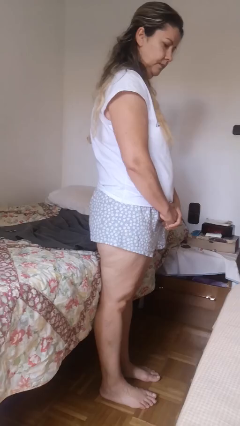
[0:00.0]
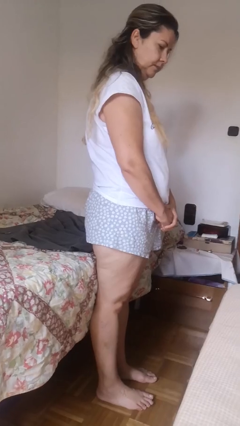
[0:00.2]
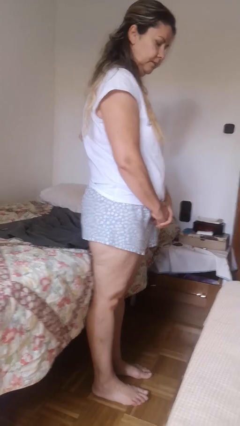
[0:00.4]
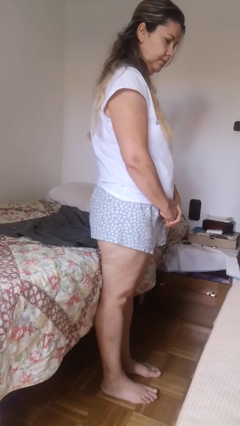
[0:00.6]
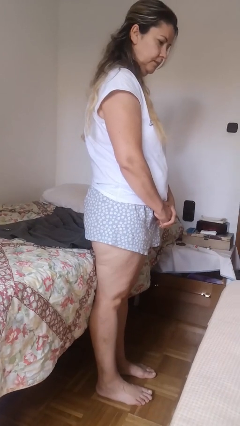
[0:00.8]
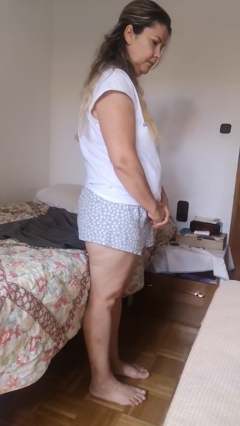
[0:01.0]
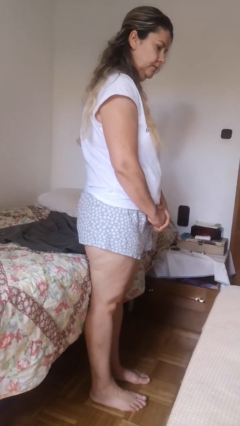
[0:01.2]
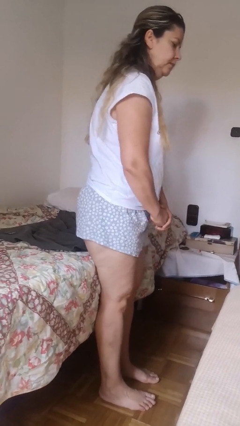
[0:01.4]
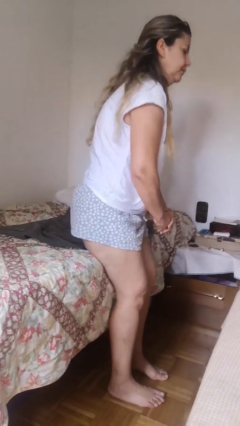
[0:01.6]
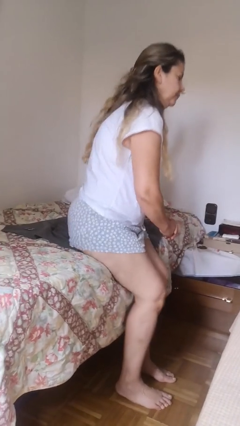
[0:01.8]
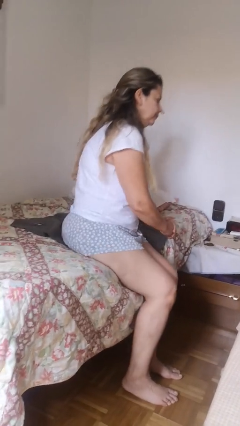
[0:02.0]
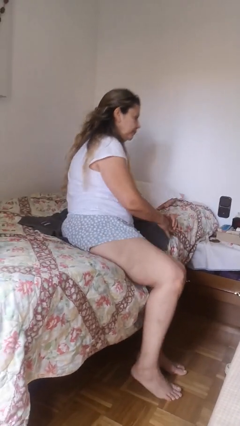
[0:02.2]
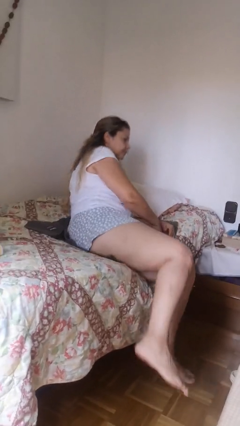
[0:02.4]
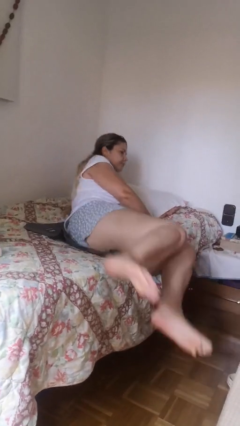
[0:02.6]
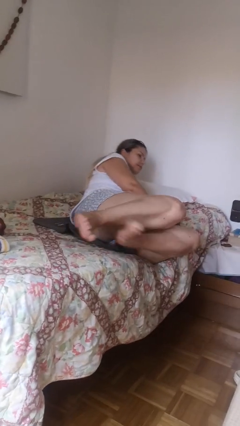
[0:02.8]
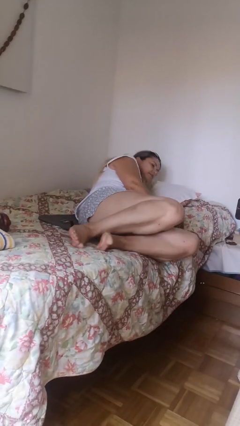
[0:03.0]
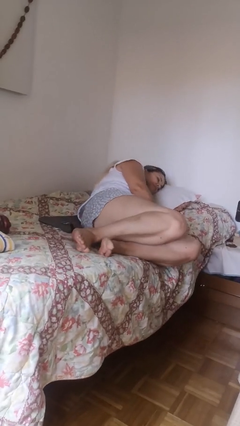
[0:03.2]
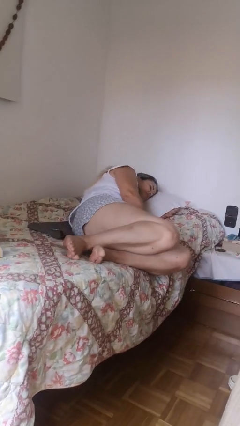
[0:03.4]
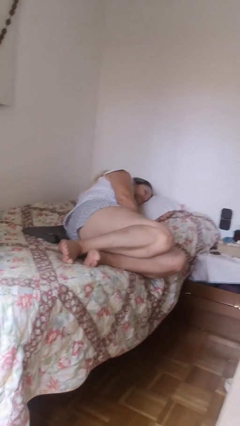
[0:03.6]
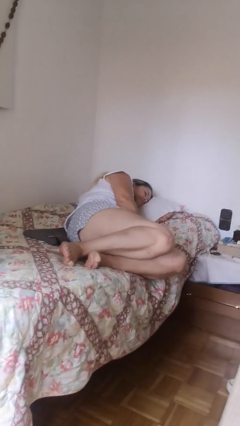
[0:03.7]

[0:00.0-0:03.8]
person lies down on bed

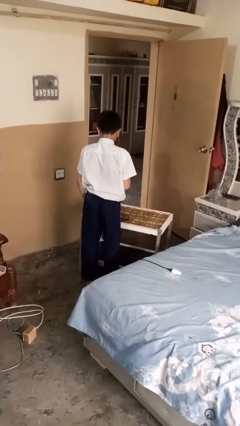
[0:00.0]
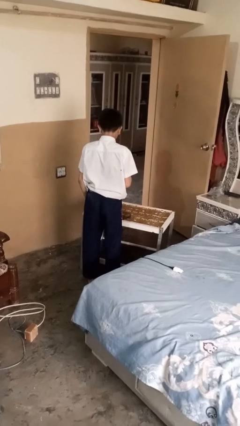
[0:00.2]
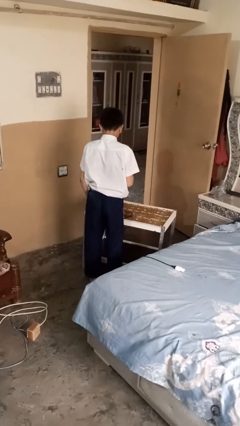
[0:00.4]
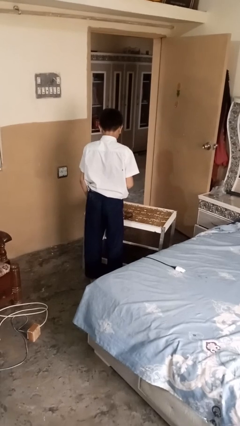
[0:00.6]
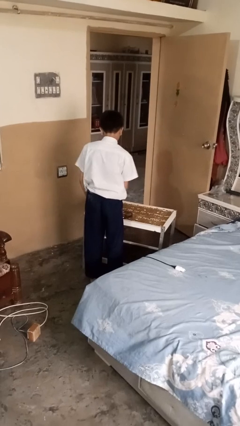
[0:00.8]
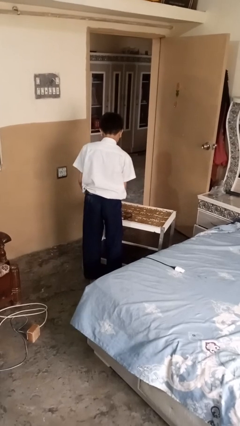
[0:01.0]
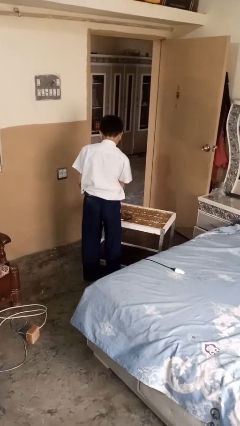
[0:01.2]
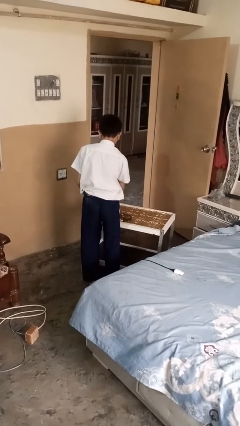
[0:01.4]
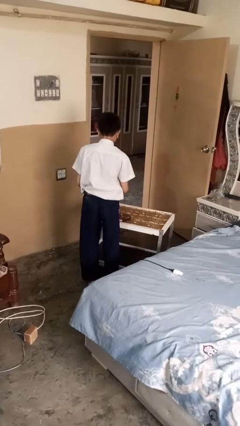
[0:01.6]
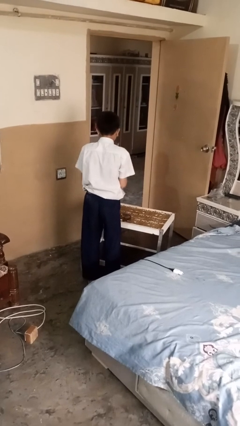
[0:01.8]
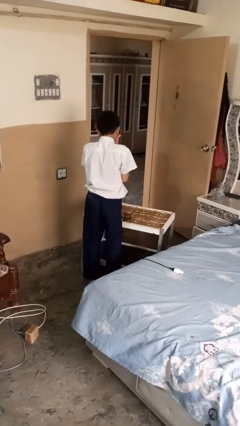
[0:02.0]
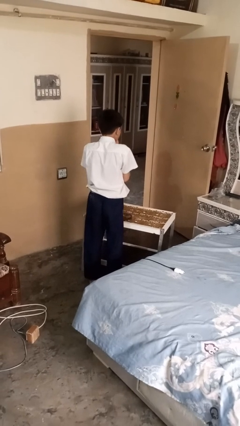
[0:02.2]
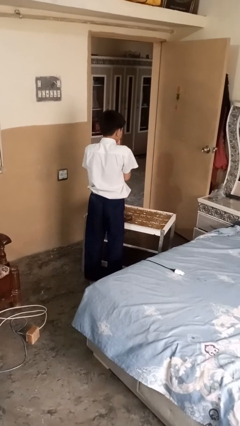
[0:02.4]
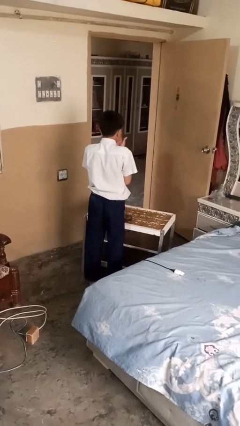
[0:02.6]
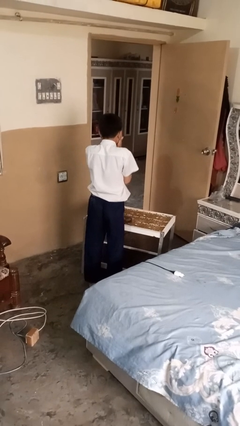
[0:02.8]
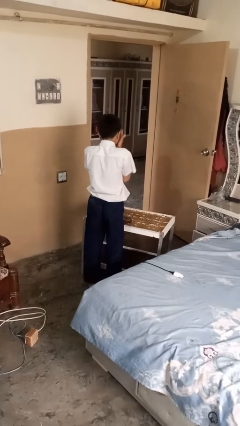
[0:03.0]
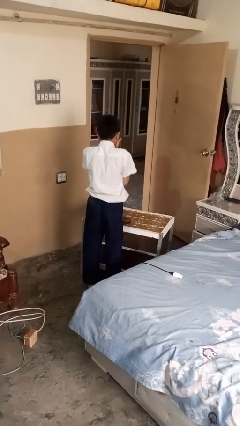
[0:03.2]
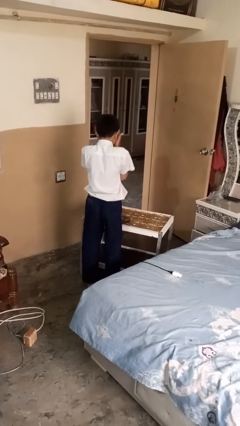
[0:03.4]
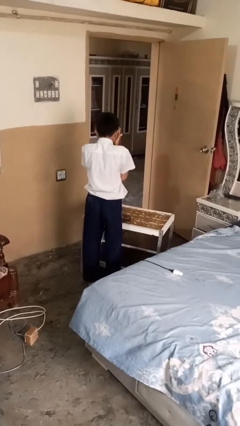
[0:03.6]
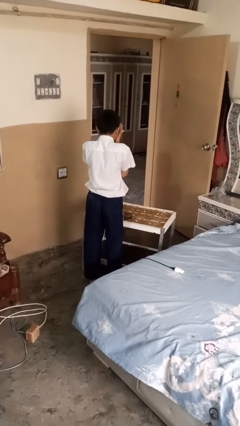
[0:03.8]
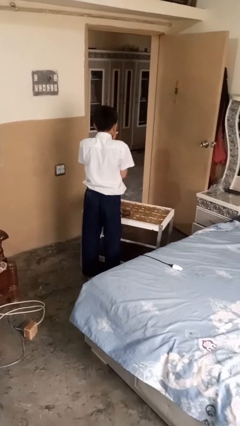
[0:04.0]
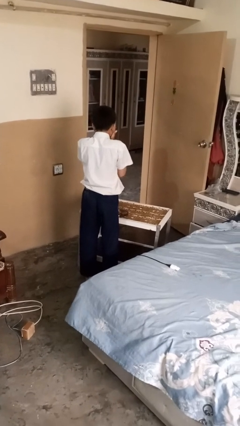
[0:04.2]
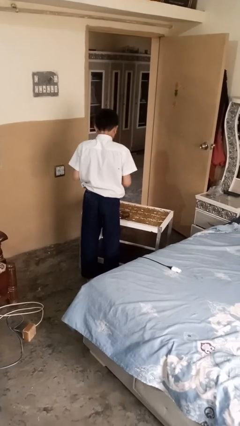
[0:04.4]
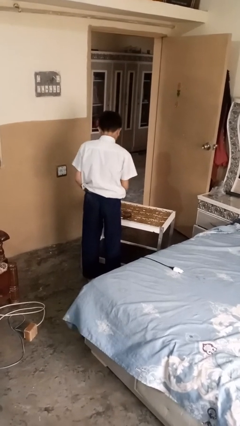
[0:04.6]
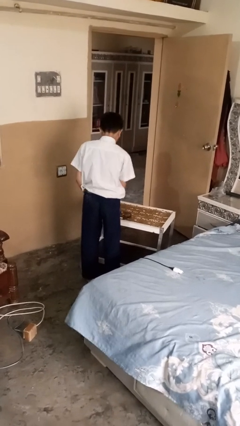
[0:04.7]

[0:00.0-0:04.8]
person applies shaving cream

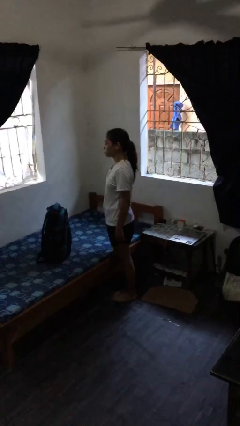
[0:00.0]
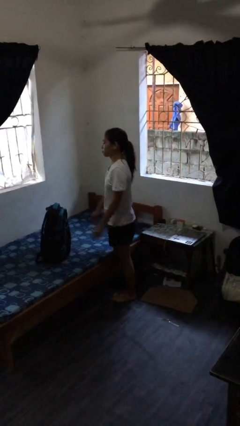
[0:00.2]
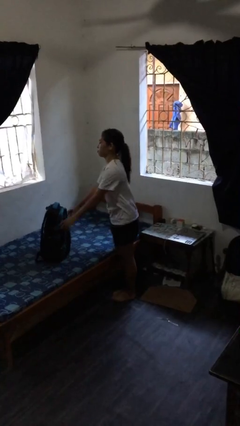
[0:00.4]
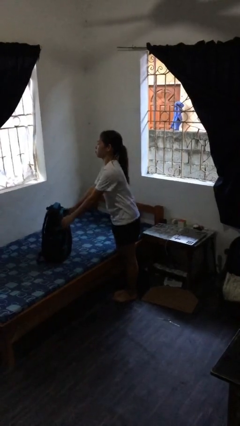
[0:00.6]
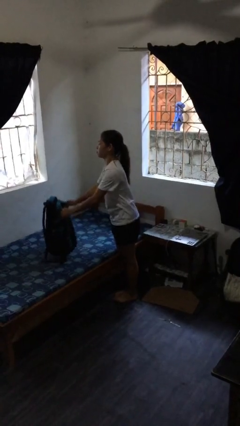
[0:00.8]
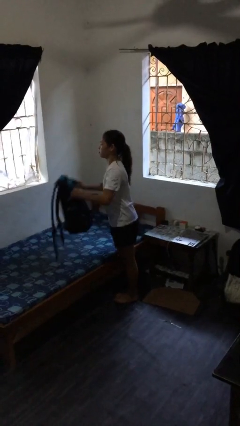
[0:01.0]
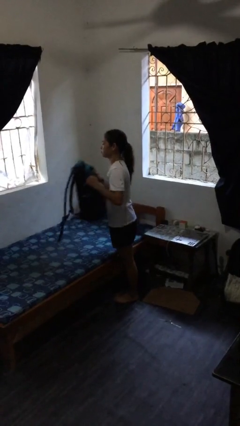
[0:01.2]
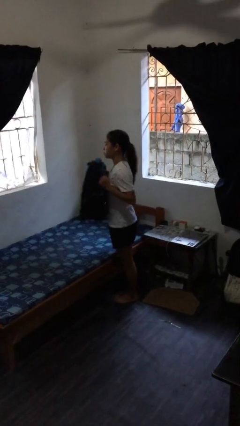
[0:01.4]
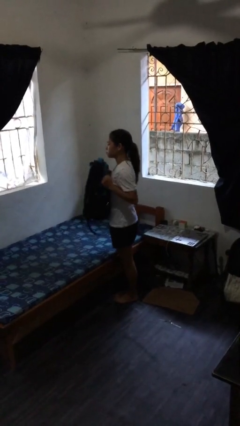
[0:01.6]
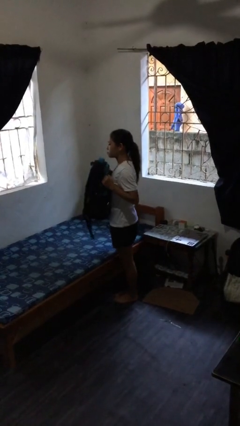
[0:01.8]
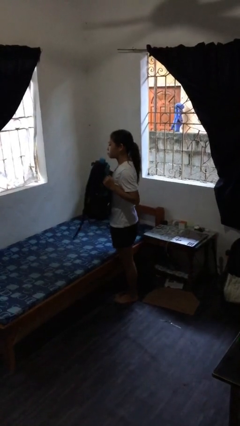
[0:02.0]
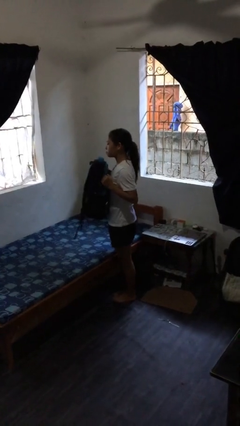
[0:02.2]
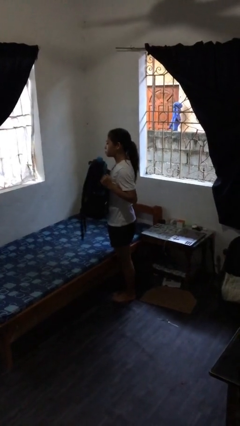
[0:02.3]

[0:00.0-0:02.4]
person picks up object from bed

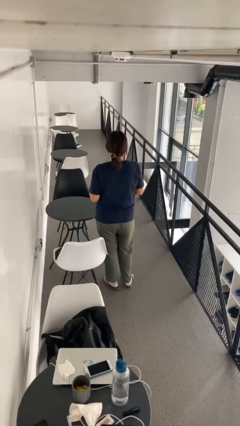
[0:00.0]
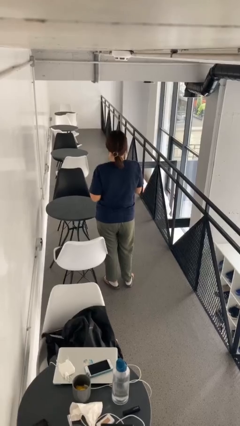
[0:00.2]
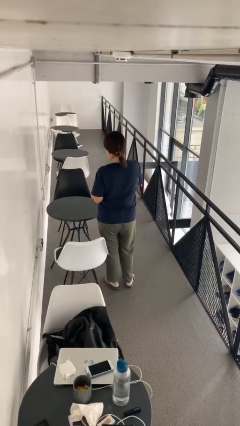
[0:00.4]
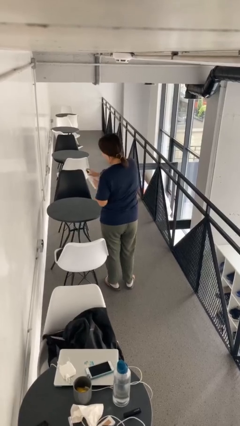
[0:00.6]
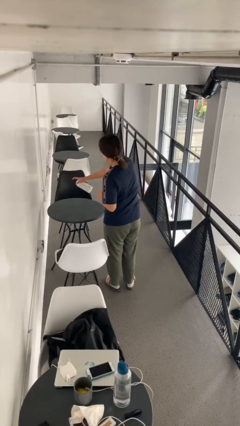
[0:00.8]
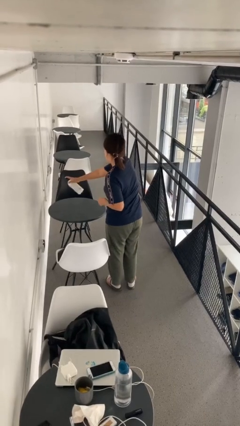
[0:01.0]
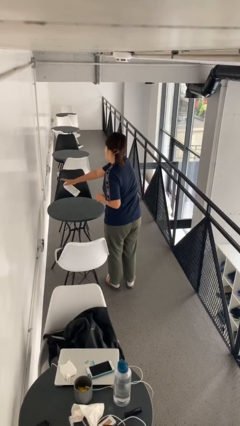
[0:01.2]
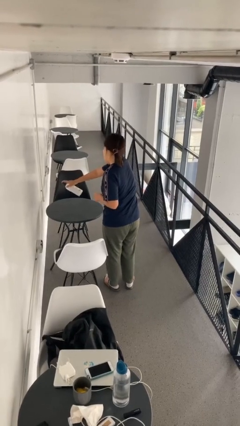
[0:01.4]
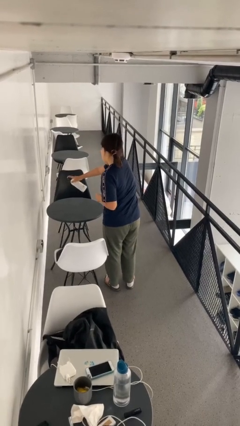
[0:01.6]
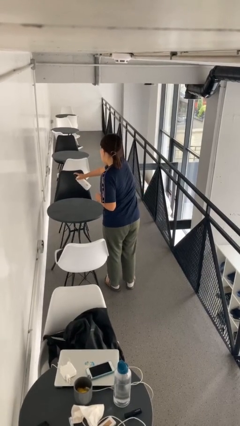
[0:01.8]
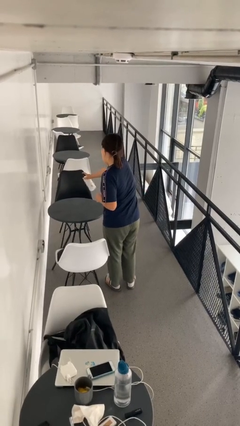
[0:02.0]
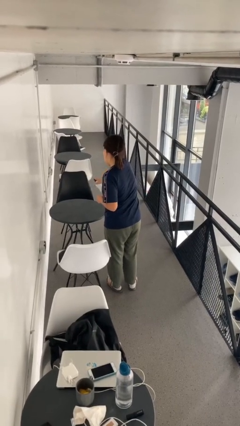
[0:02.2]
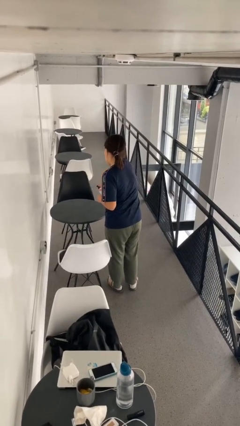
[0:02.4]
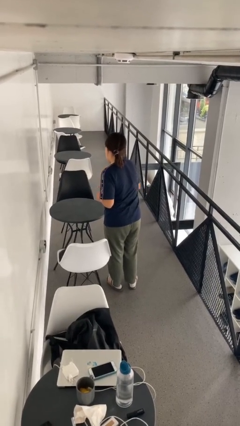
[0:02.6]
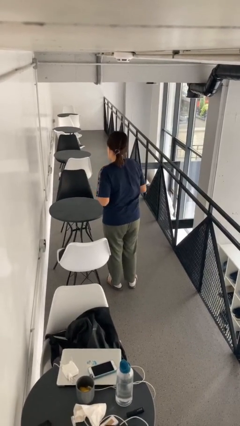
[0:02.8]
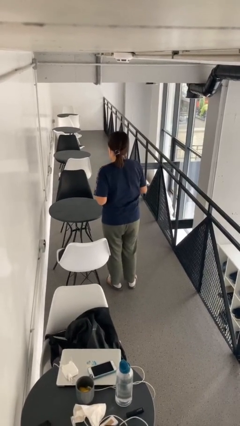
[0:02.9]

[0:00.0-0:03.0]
person sprays from bottle

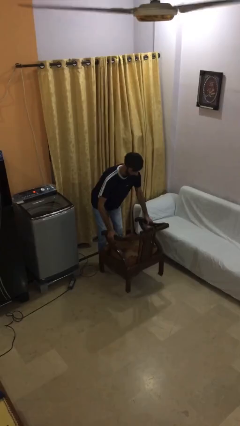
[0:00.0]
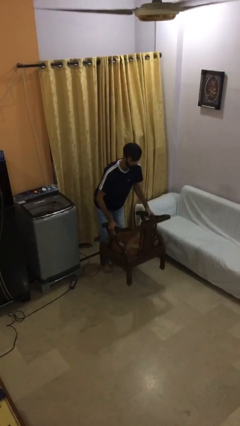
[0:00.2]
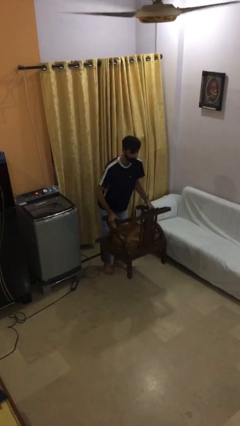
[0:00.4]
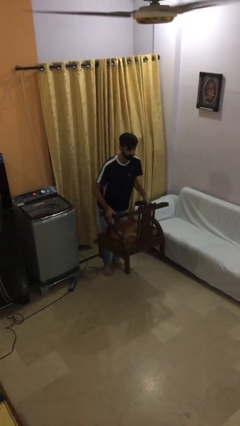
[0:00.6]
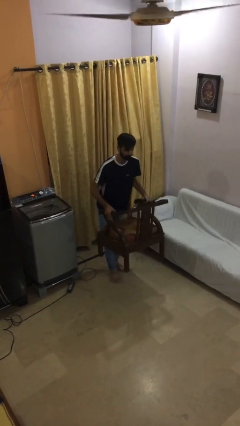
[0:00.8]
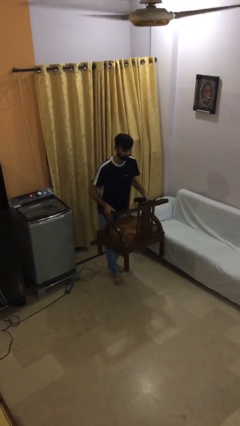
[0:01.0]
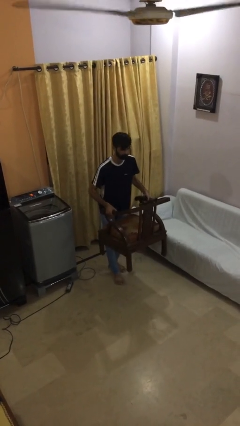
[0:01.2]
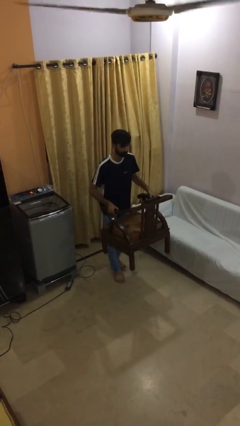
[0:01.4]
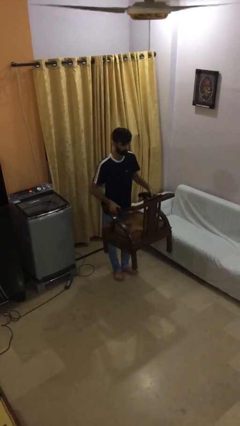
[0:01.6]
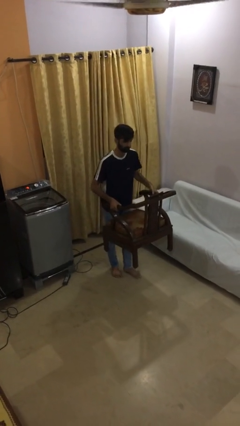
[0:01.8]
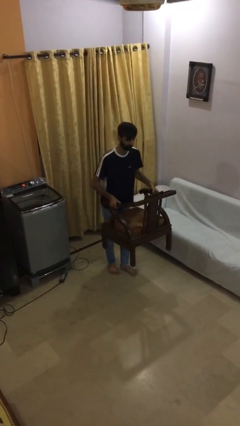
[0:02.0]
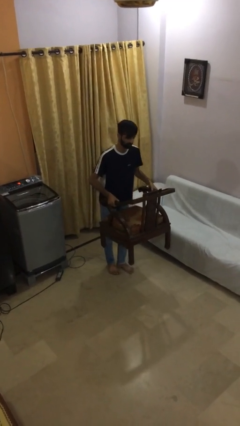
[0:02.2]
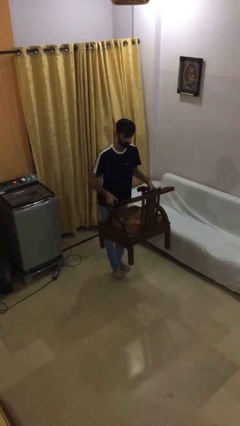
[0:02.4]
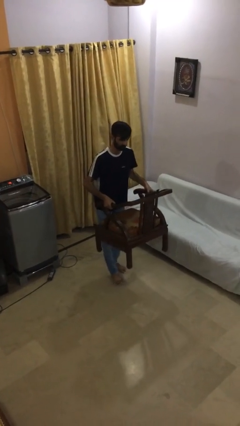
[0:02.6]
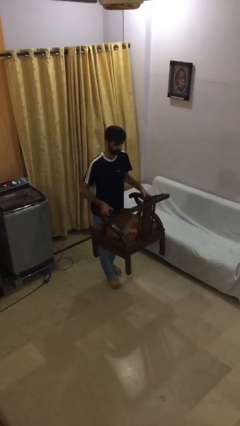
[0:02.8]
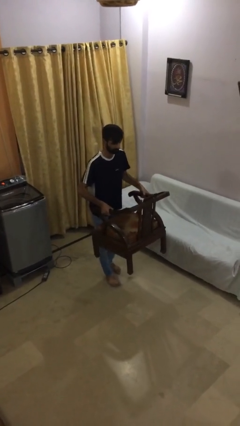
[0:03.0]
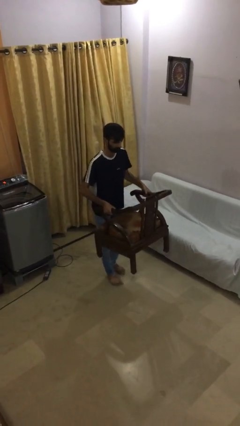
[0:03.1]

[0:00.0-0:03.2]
person carries heavy object

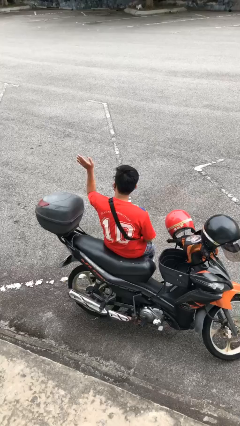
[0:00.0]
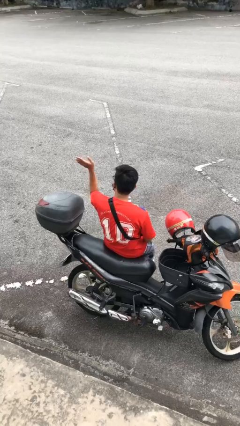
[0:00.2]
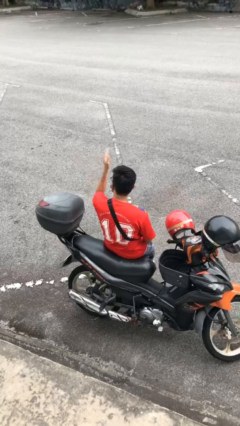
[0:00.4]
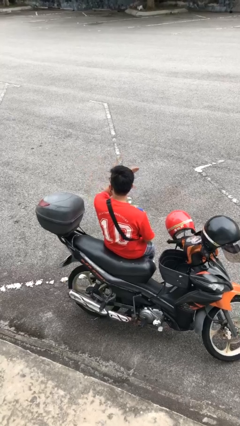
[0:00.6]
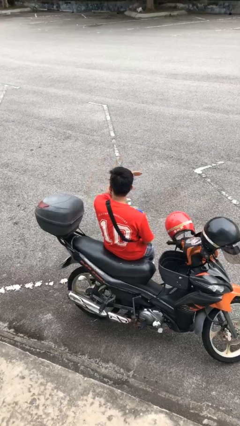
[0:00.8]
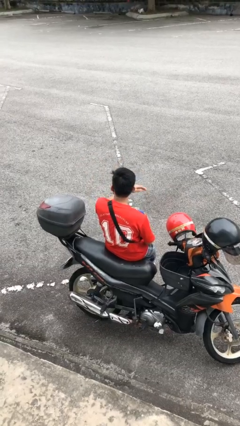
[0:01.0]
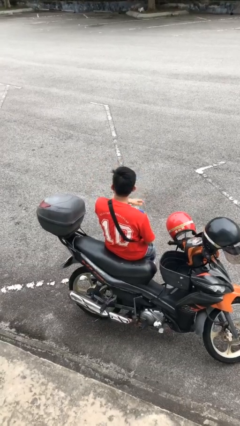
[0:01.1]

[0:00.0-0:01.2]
person gestures swipe right
